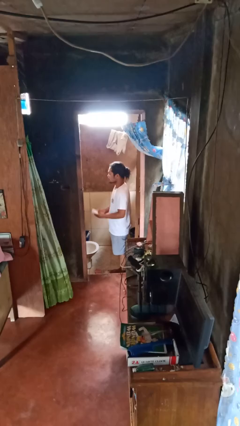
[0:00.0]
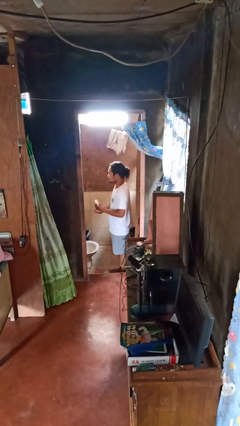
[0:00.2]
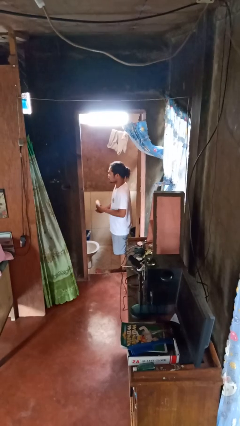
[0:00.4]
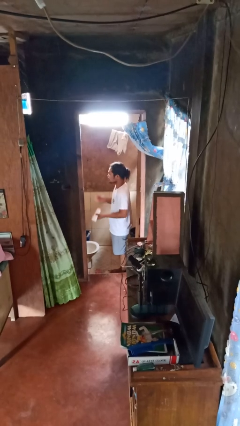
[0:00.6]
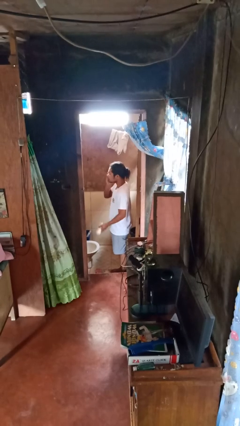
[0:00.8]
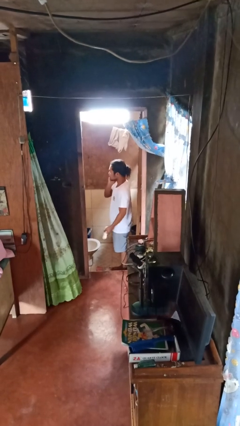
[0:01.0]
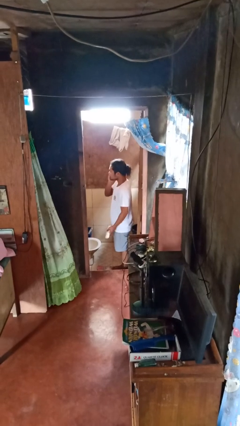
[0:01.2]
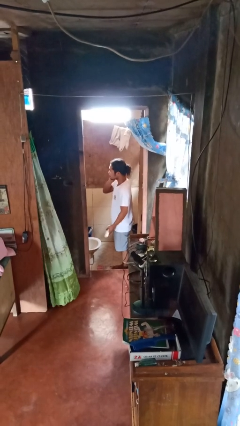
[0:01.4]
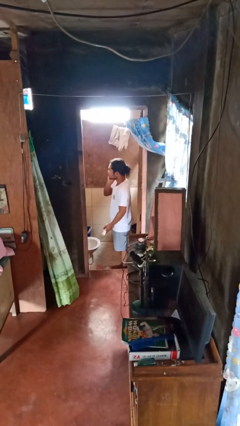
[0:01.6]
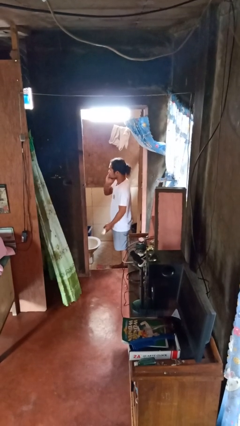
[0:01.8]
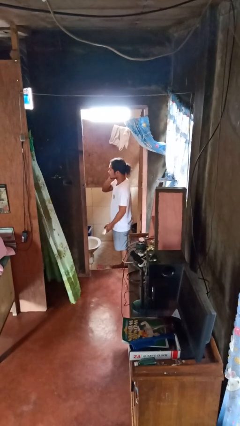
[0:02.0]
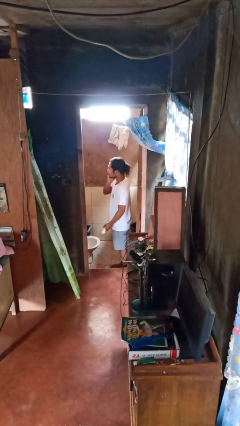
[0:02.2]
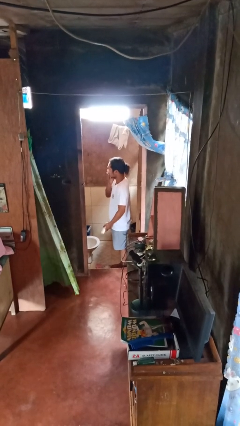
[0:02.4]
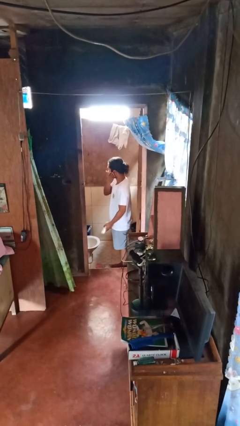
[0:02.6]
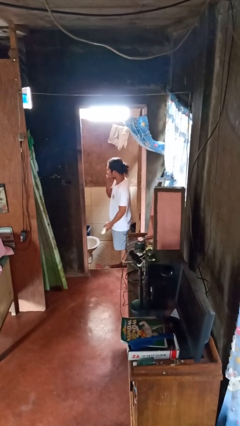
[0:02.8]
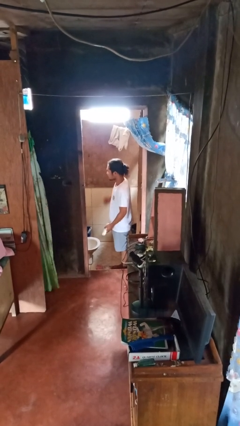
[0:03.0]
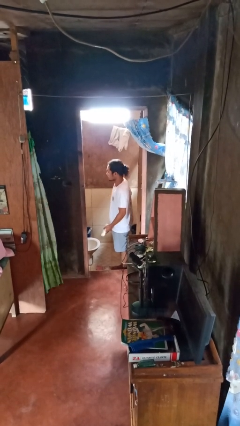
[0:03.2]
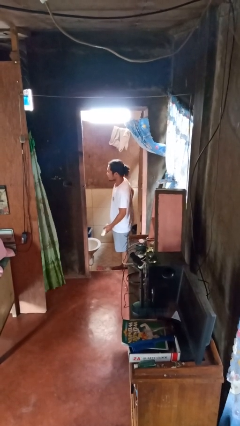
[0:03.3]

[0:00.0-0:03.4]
person applies shaving cream

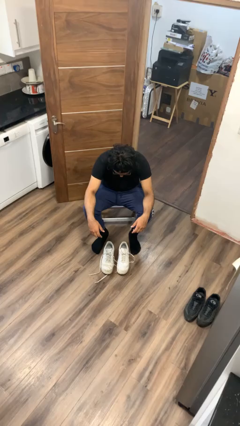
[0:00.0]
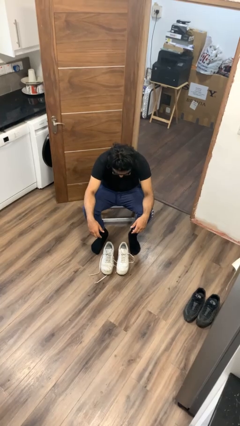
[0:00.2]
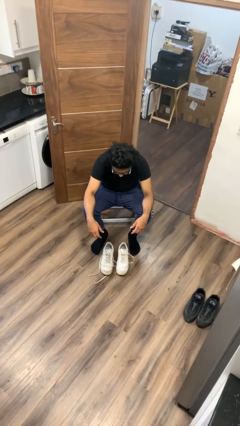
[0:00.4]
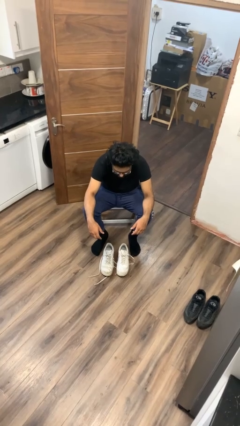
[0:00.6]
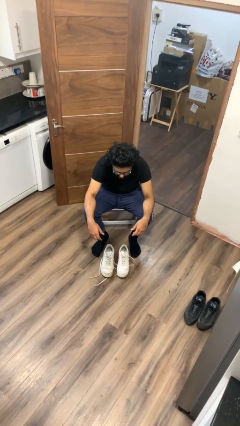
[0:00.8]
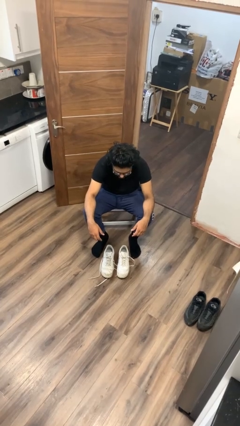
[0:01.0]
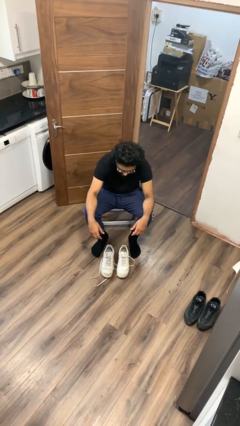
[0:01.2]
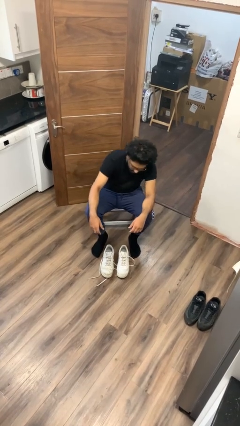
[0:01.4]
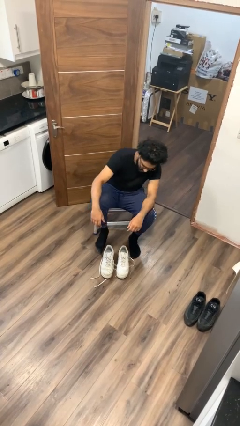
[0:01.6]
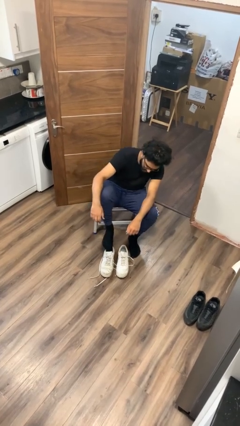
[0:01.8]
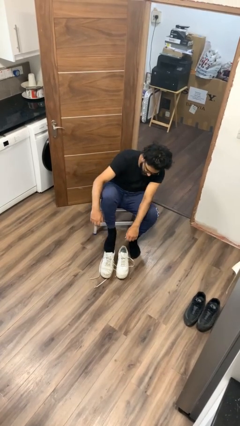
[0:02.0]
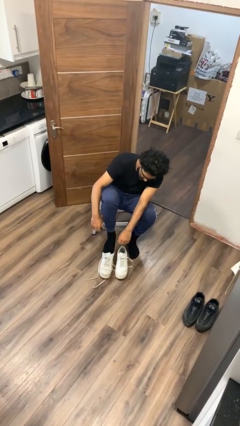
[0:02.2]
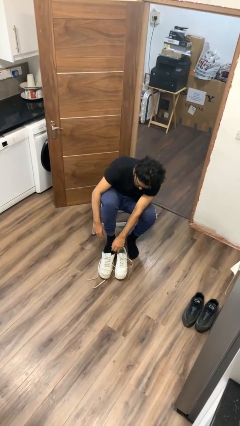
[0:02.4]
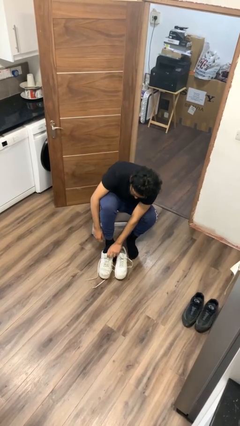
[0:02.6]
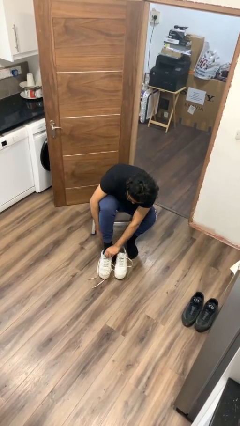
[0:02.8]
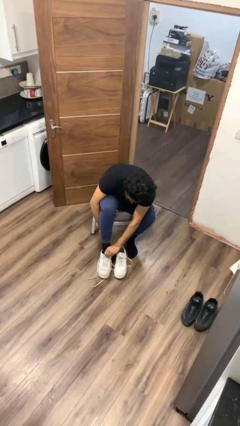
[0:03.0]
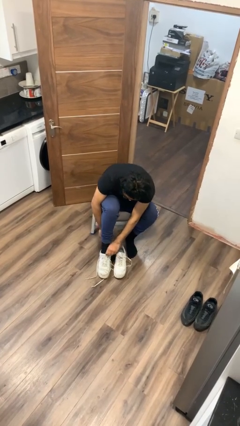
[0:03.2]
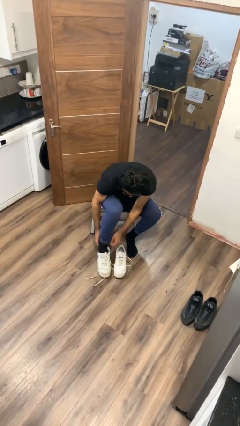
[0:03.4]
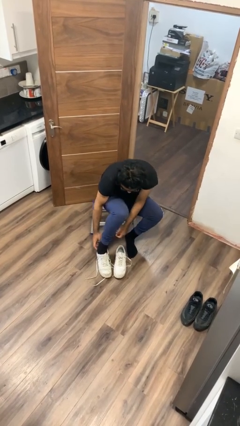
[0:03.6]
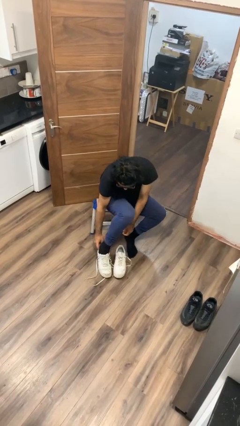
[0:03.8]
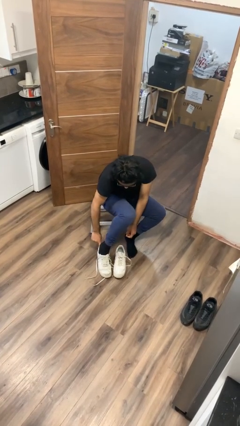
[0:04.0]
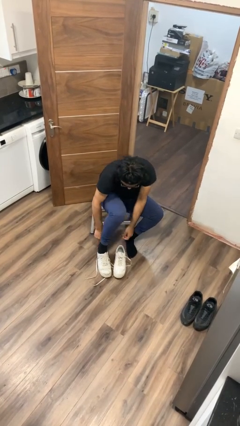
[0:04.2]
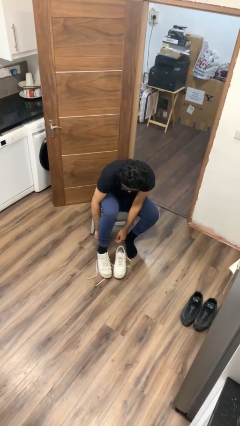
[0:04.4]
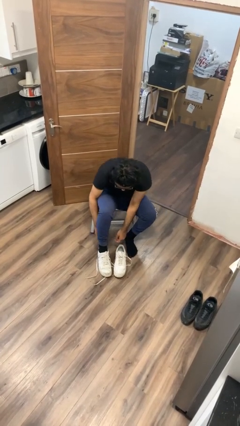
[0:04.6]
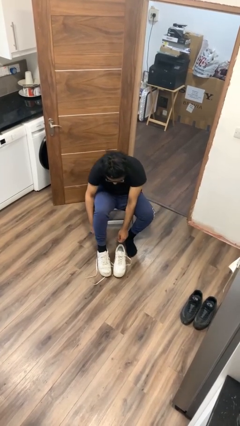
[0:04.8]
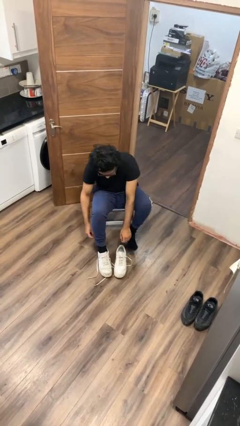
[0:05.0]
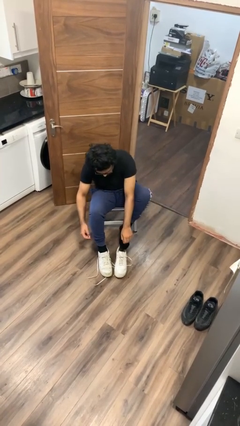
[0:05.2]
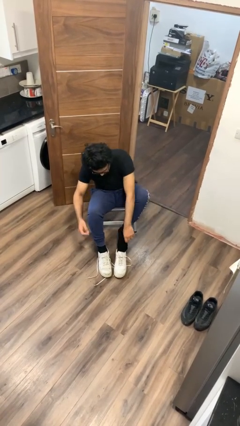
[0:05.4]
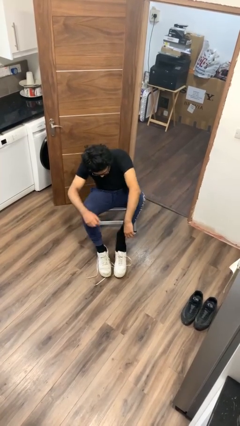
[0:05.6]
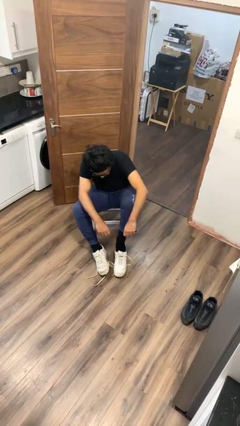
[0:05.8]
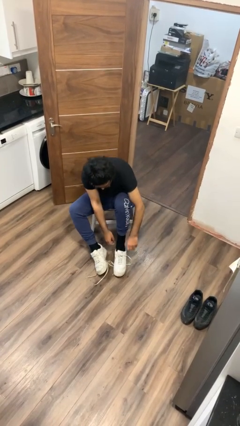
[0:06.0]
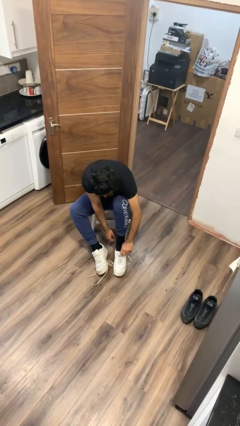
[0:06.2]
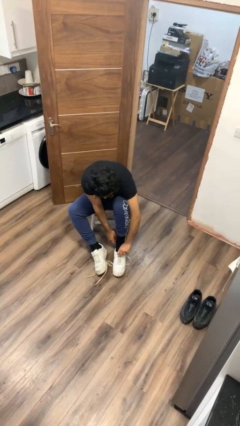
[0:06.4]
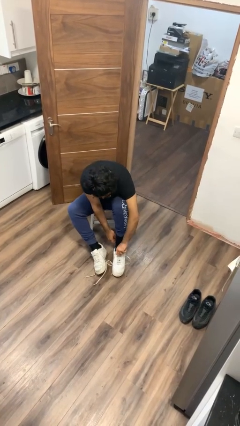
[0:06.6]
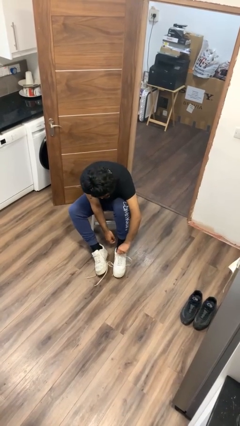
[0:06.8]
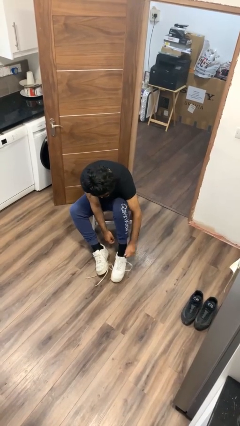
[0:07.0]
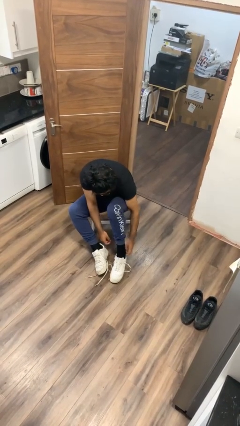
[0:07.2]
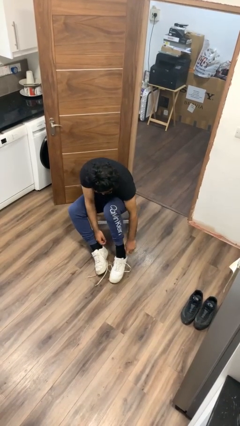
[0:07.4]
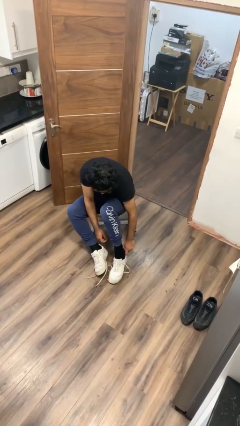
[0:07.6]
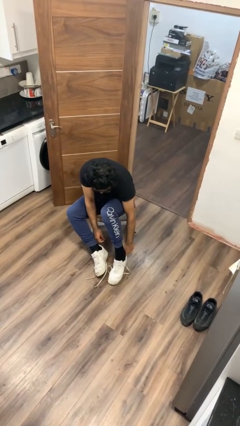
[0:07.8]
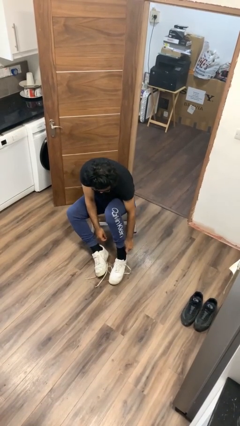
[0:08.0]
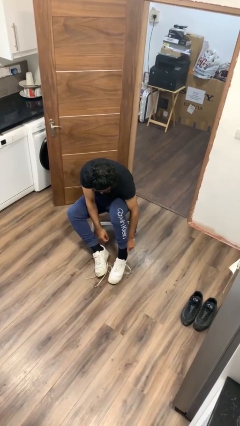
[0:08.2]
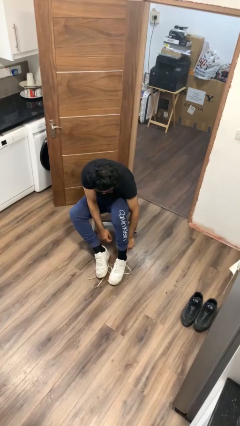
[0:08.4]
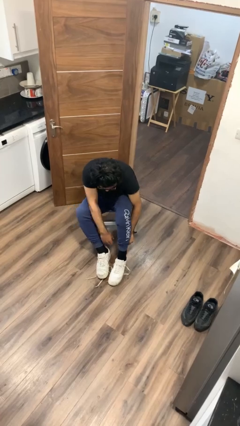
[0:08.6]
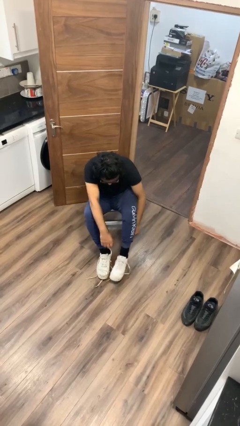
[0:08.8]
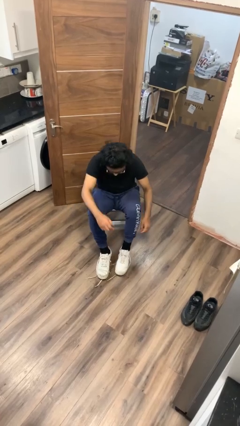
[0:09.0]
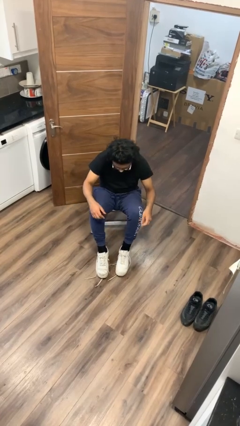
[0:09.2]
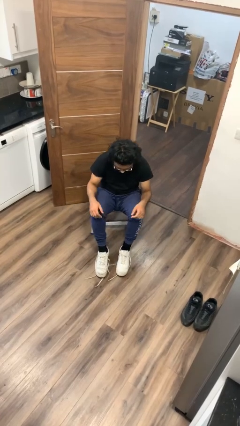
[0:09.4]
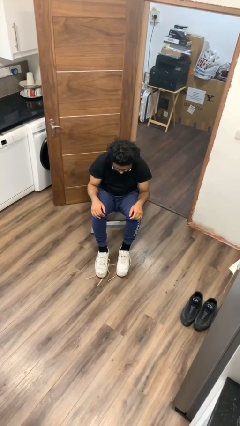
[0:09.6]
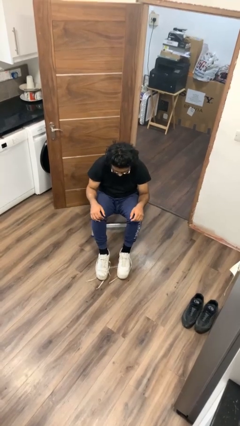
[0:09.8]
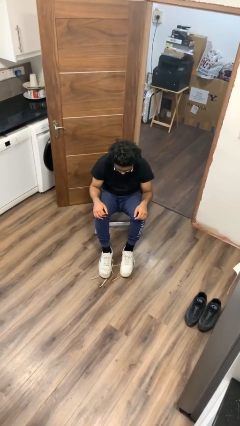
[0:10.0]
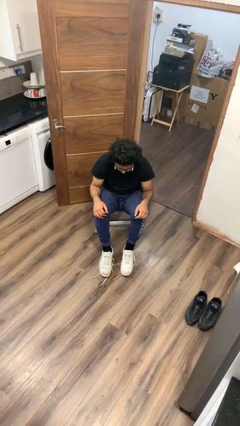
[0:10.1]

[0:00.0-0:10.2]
person puts on shoes

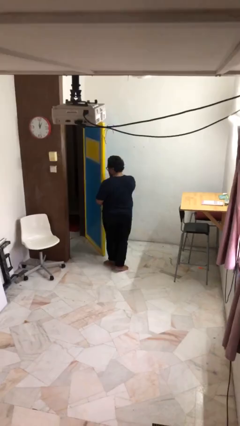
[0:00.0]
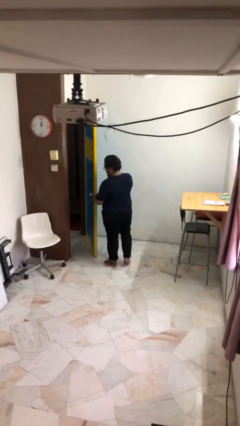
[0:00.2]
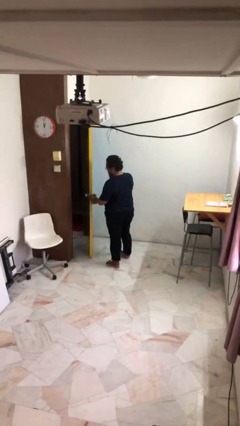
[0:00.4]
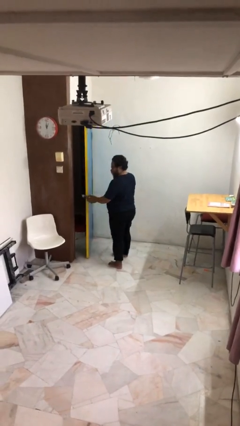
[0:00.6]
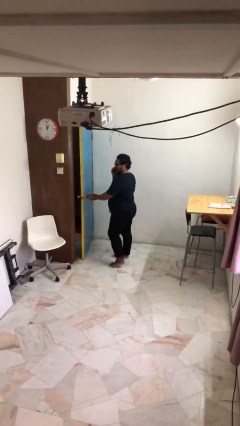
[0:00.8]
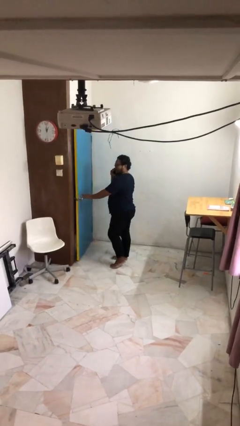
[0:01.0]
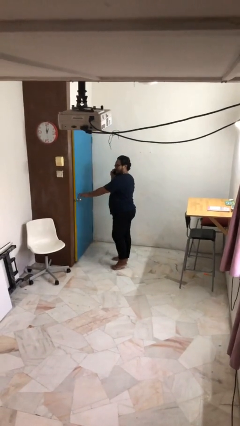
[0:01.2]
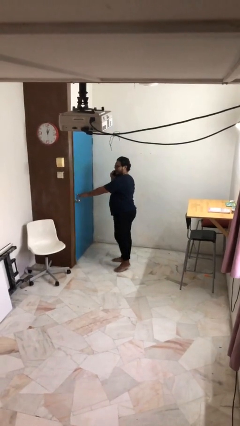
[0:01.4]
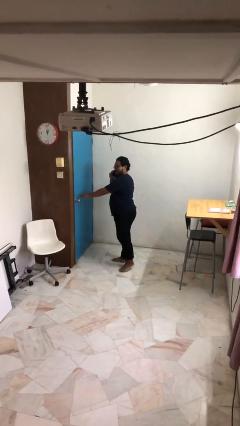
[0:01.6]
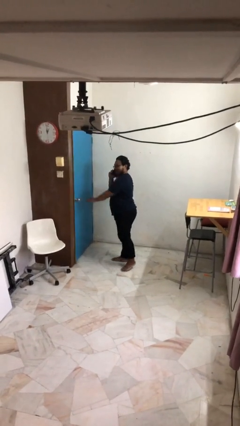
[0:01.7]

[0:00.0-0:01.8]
person closes facility door

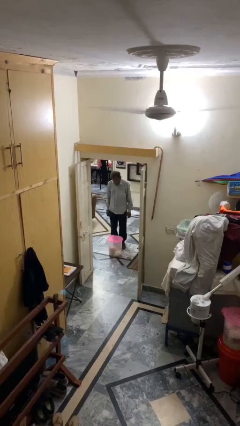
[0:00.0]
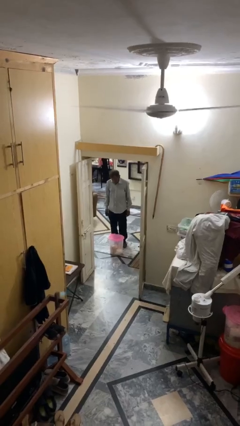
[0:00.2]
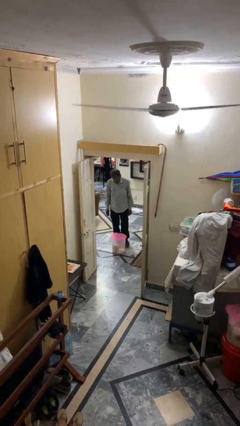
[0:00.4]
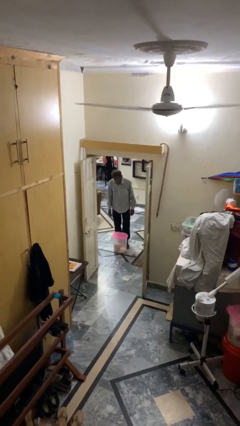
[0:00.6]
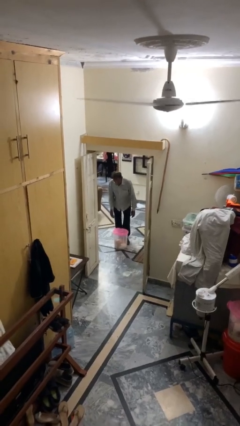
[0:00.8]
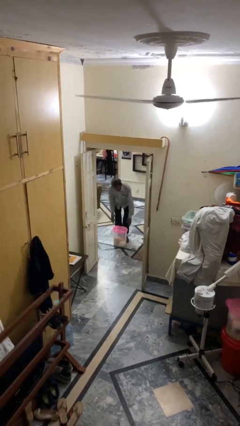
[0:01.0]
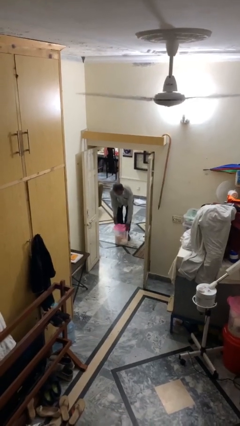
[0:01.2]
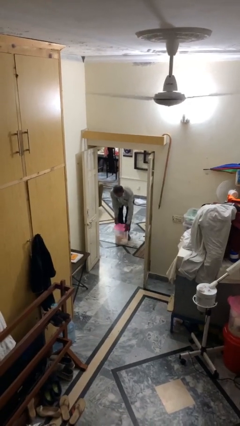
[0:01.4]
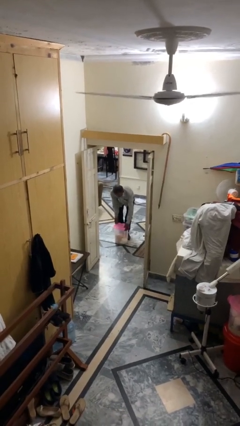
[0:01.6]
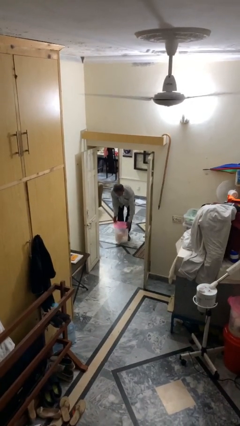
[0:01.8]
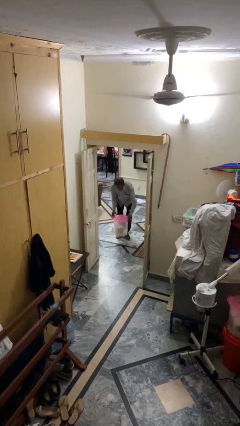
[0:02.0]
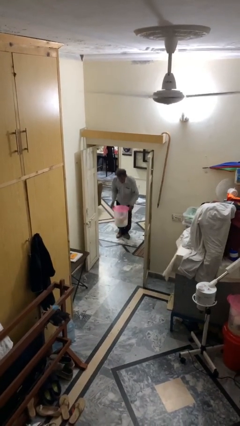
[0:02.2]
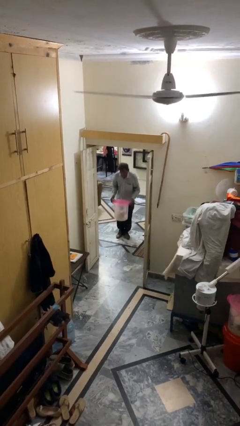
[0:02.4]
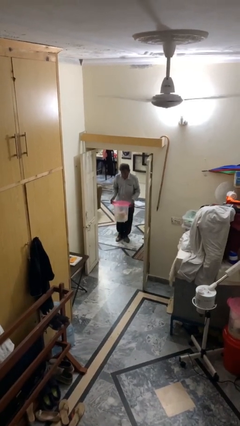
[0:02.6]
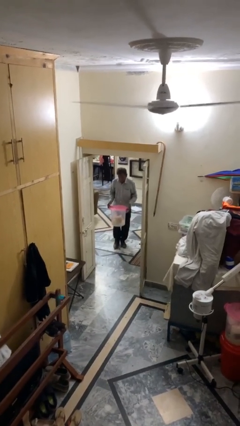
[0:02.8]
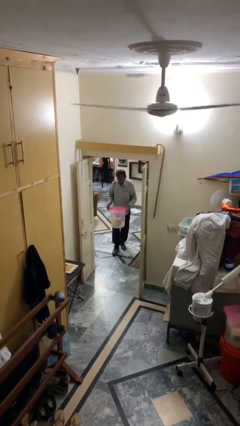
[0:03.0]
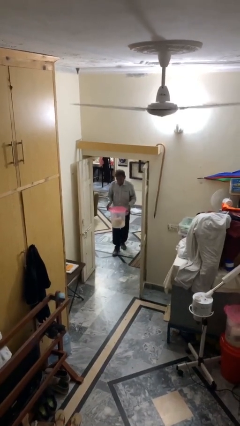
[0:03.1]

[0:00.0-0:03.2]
person picks up object from floor
